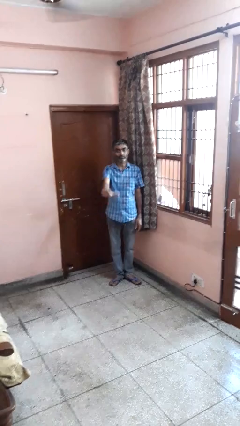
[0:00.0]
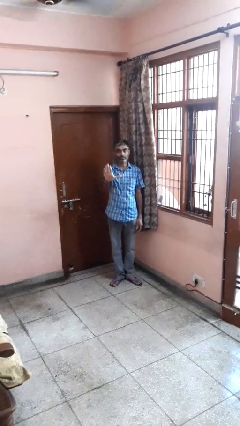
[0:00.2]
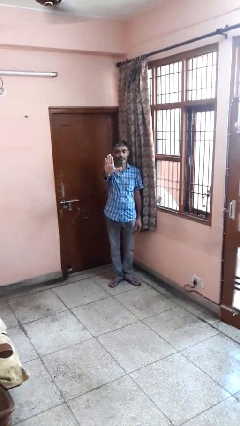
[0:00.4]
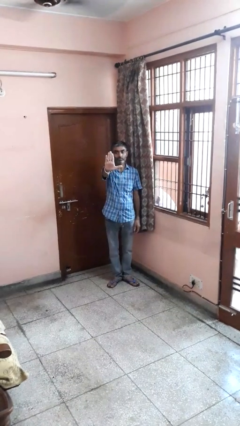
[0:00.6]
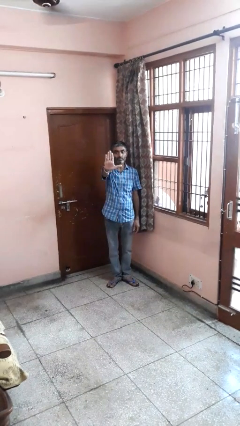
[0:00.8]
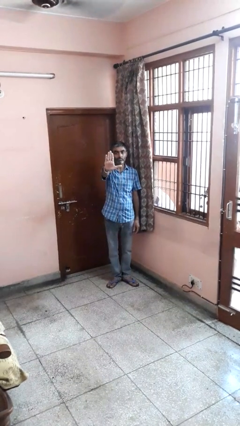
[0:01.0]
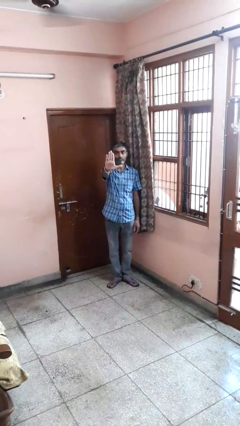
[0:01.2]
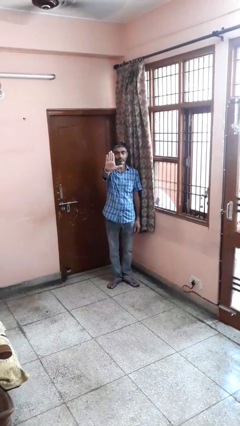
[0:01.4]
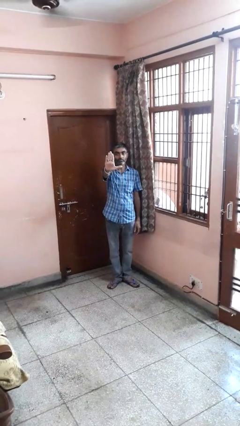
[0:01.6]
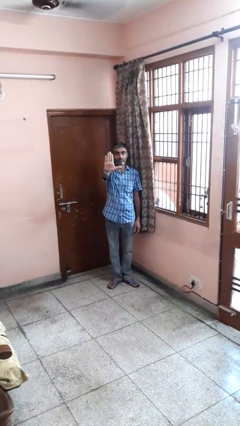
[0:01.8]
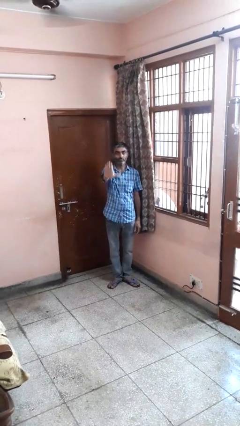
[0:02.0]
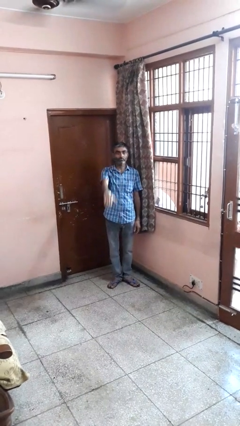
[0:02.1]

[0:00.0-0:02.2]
person gestures stop

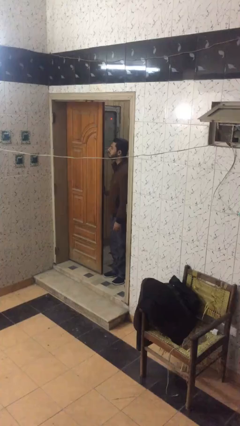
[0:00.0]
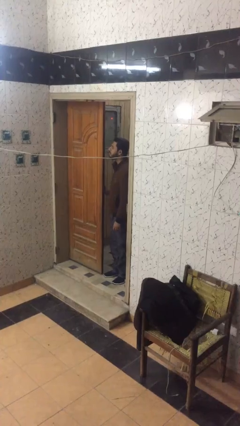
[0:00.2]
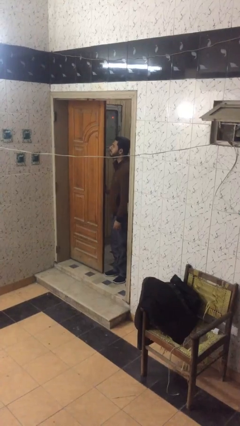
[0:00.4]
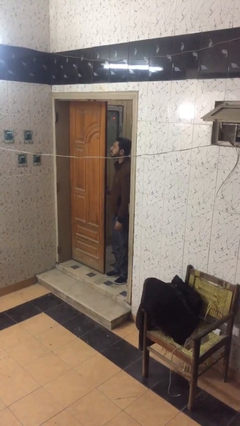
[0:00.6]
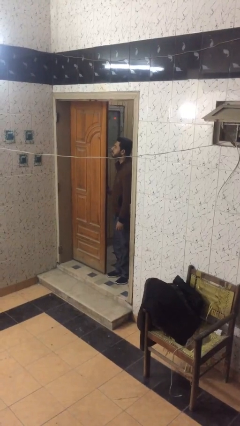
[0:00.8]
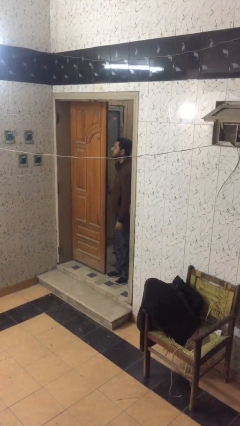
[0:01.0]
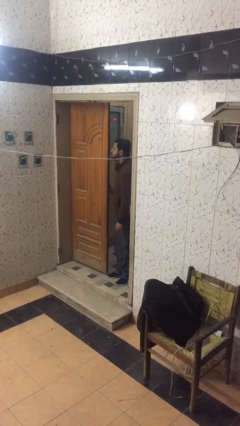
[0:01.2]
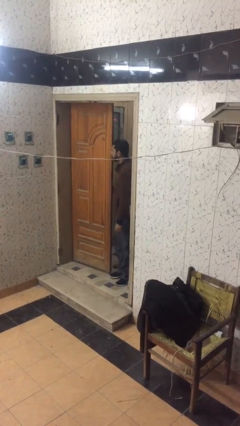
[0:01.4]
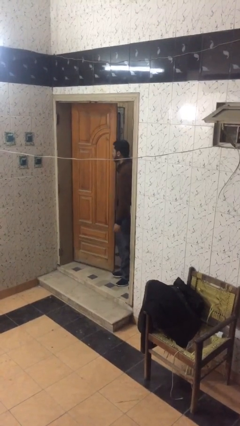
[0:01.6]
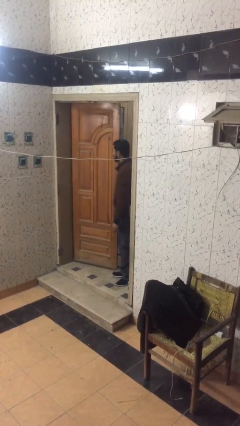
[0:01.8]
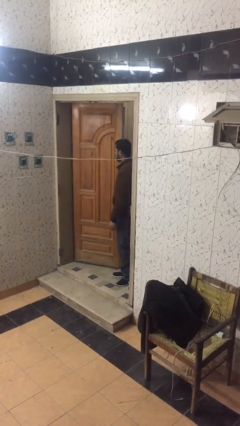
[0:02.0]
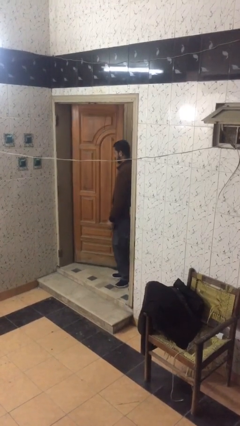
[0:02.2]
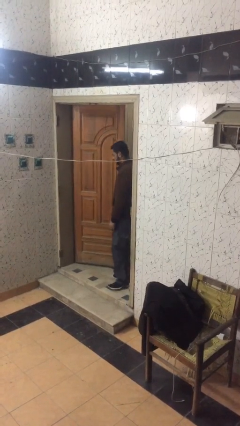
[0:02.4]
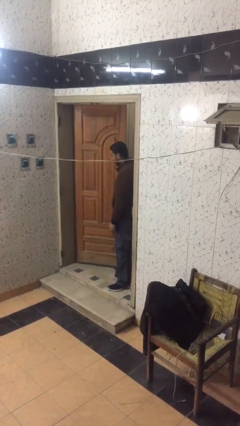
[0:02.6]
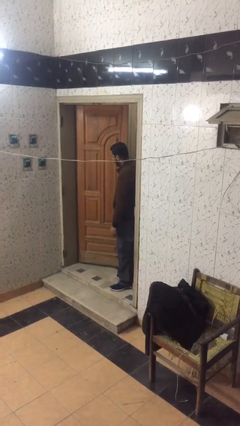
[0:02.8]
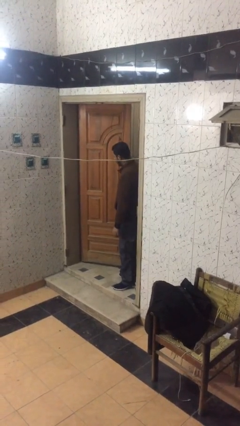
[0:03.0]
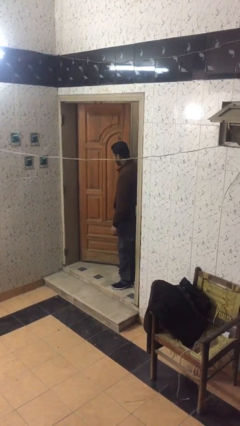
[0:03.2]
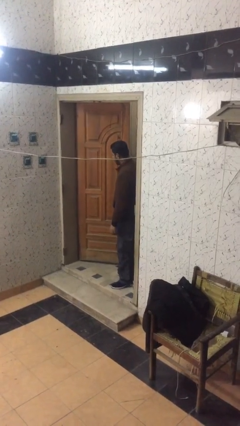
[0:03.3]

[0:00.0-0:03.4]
person opens facility door

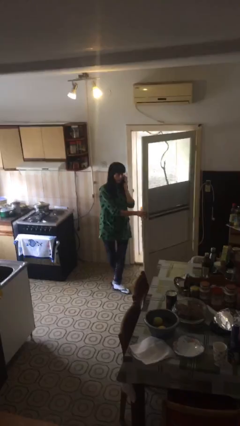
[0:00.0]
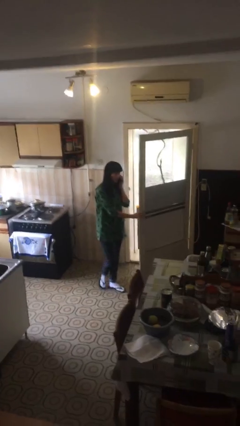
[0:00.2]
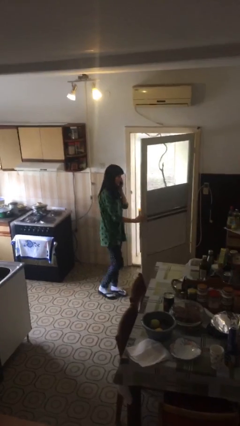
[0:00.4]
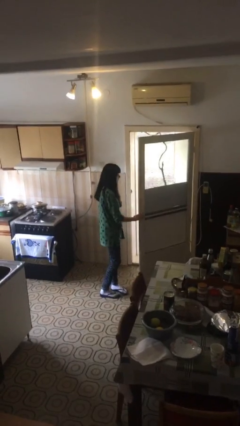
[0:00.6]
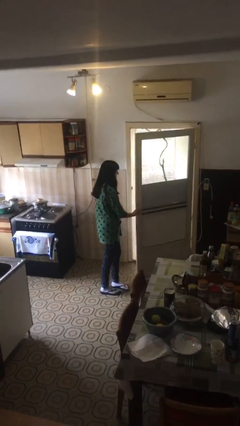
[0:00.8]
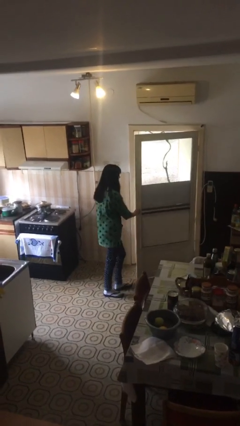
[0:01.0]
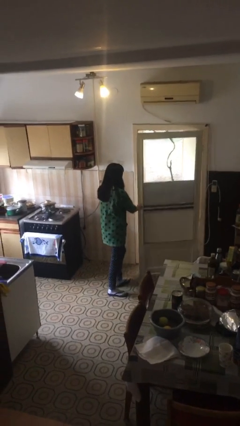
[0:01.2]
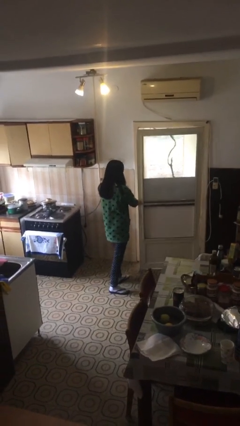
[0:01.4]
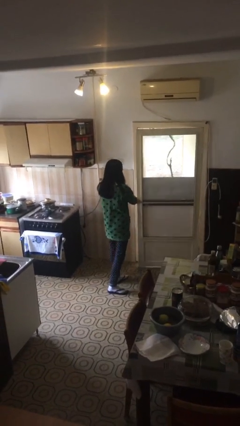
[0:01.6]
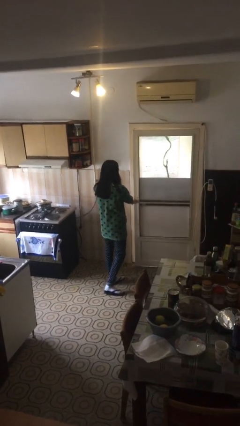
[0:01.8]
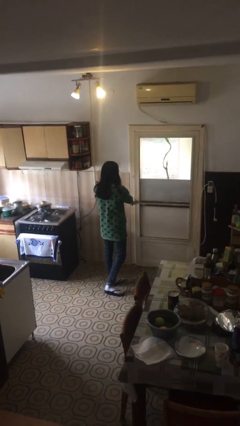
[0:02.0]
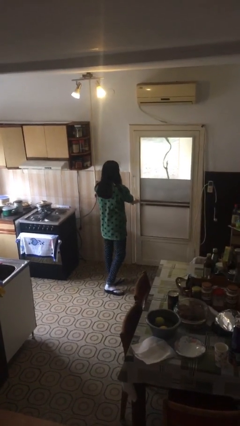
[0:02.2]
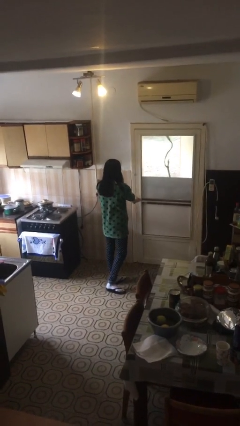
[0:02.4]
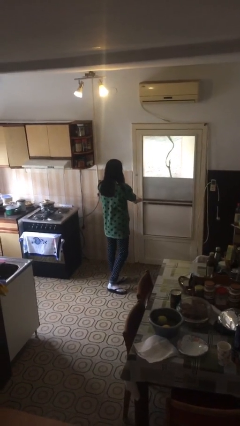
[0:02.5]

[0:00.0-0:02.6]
person closes facility door

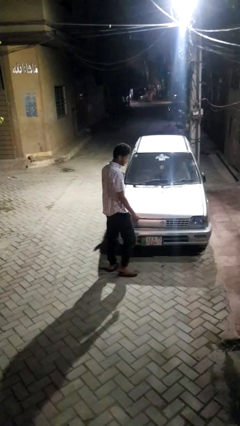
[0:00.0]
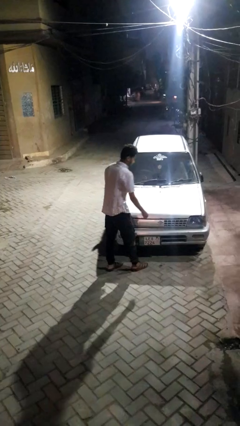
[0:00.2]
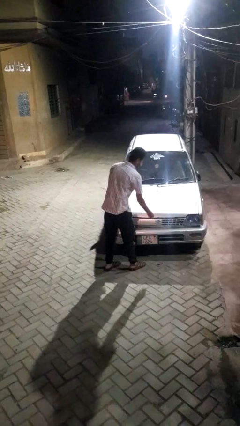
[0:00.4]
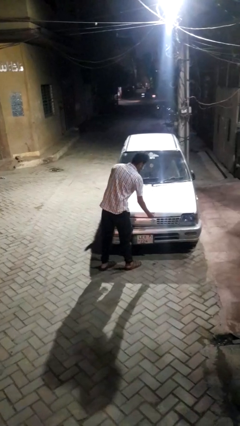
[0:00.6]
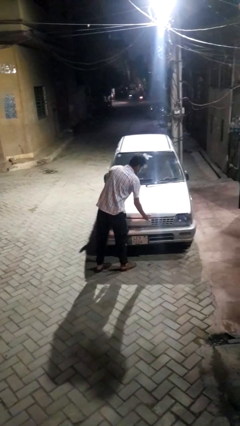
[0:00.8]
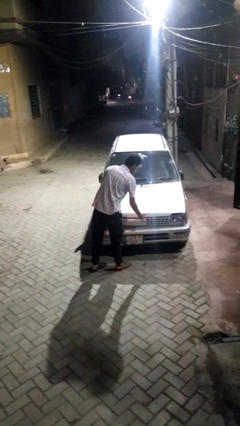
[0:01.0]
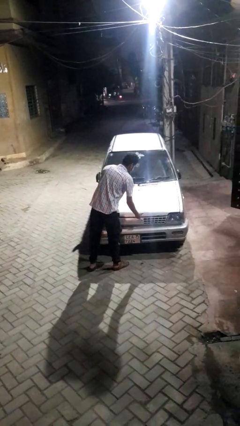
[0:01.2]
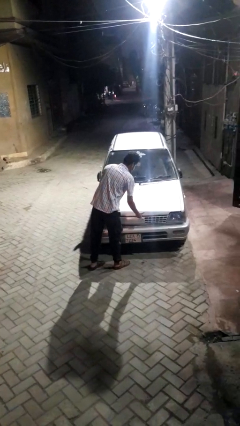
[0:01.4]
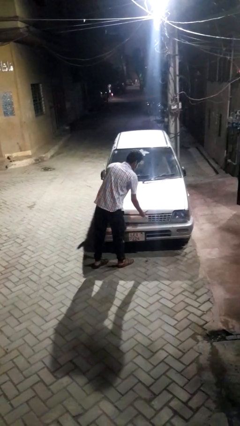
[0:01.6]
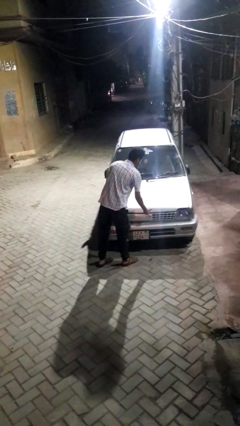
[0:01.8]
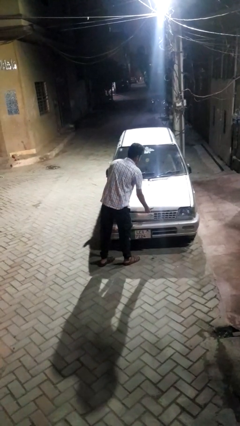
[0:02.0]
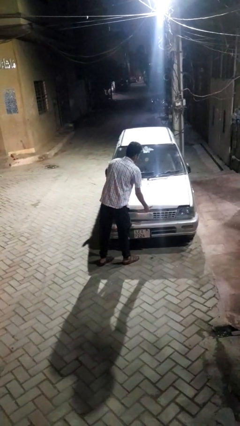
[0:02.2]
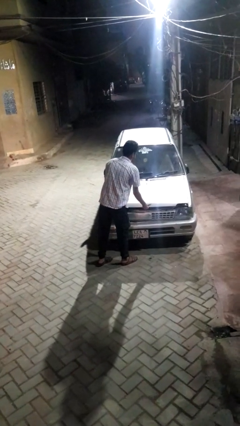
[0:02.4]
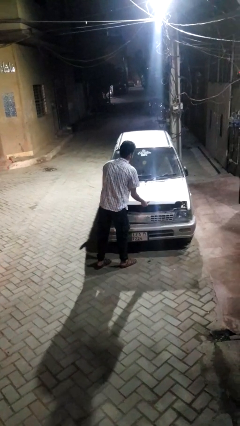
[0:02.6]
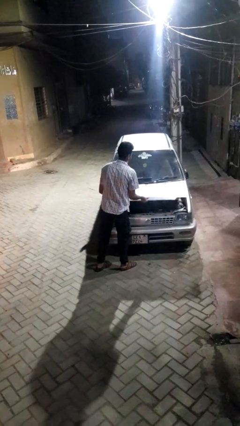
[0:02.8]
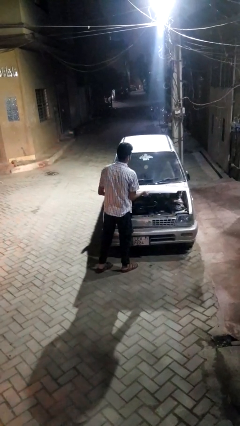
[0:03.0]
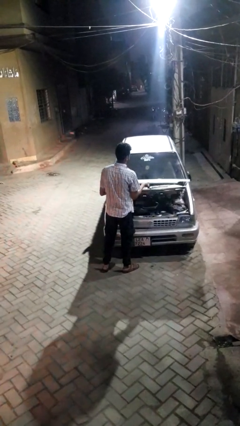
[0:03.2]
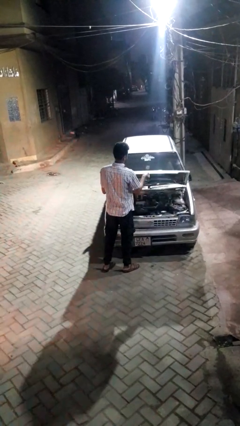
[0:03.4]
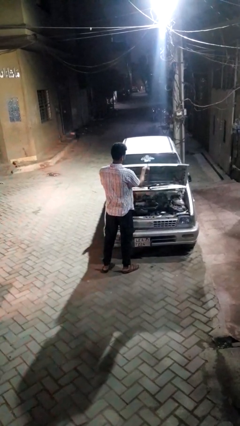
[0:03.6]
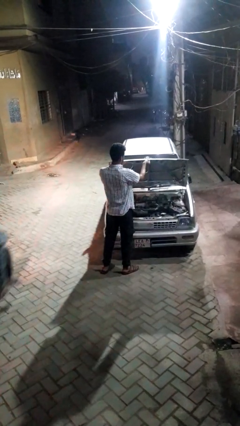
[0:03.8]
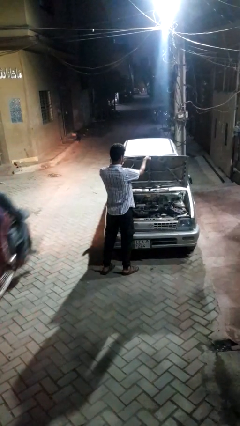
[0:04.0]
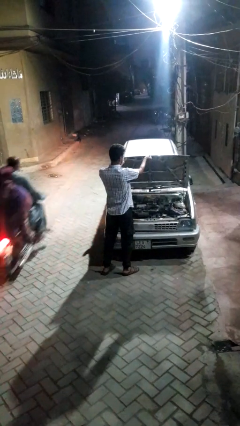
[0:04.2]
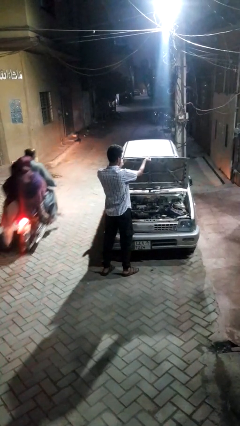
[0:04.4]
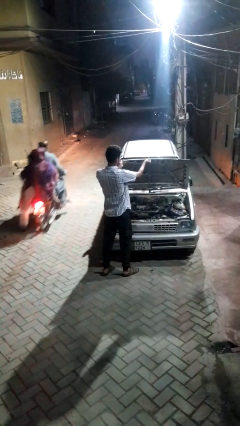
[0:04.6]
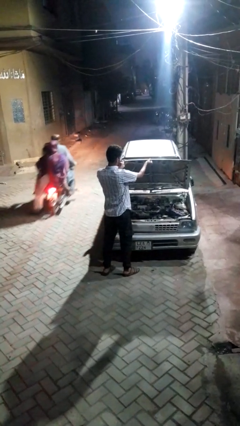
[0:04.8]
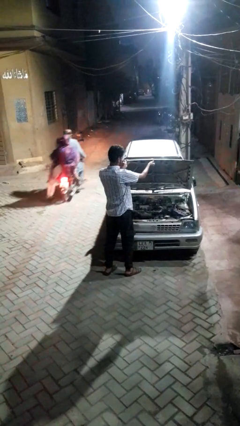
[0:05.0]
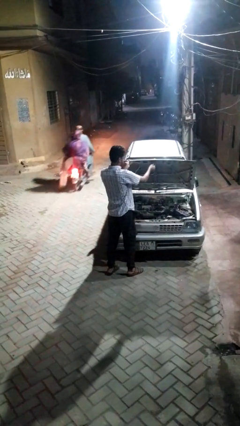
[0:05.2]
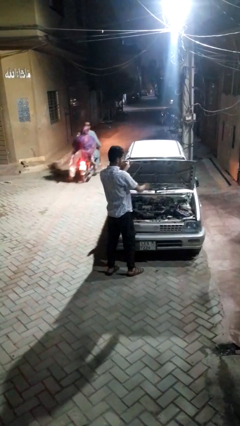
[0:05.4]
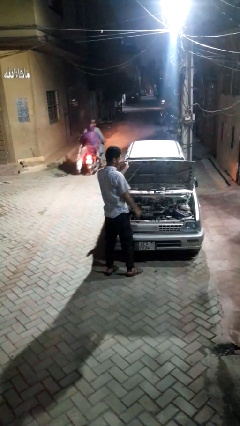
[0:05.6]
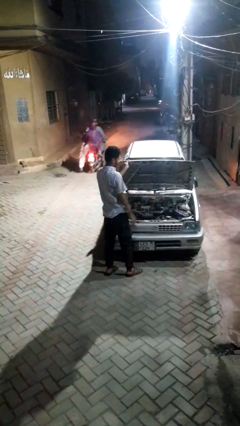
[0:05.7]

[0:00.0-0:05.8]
person opens car hood

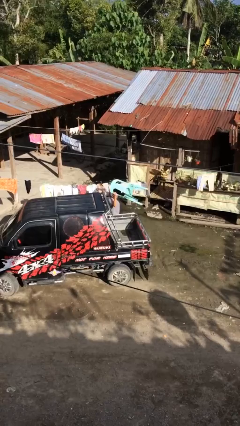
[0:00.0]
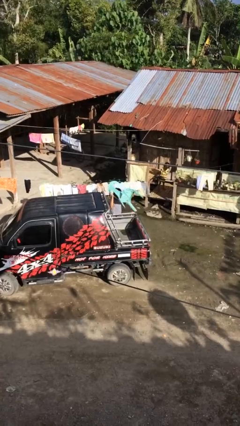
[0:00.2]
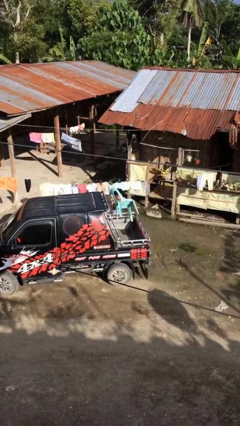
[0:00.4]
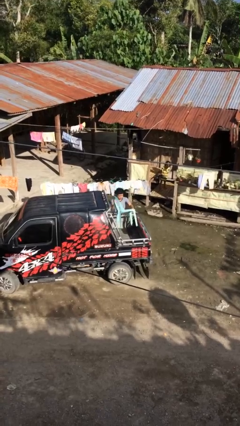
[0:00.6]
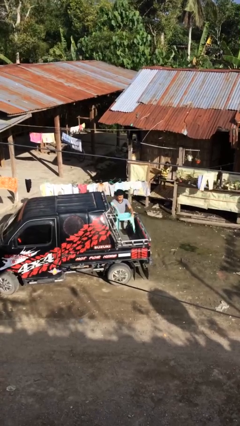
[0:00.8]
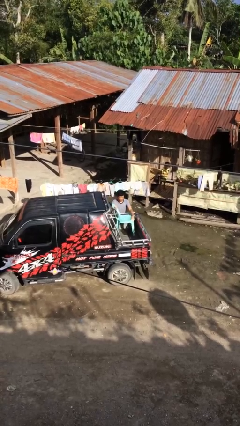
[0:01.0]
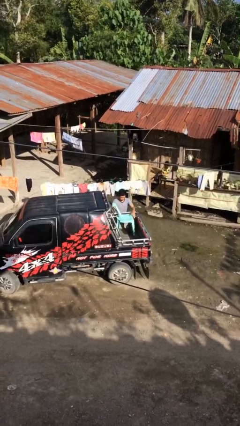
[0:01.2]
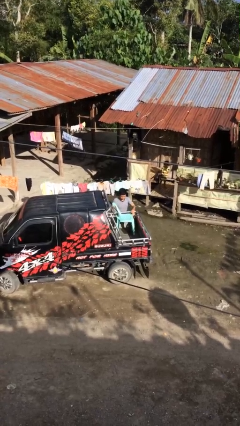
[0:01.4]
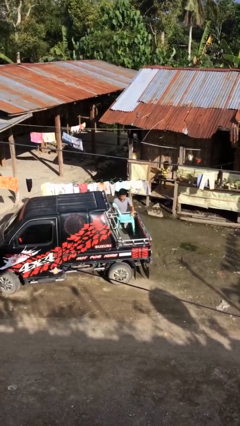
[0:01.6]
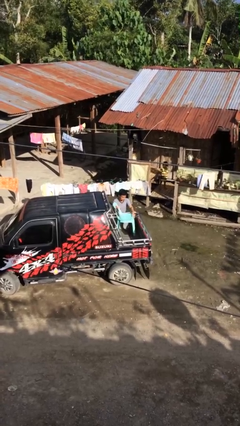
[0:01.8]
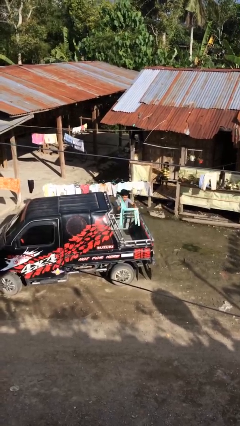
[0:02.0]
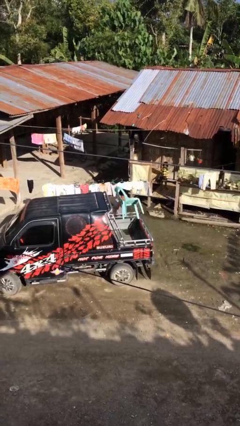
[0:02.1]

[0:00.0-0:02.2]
person loads car

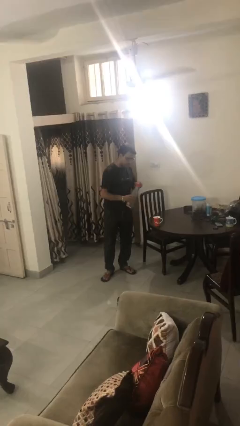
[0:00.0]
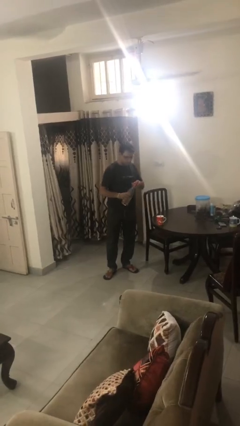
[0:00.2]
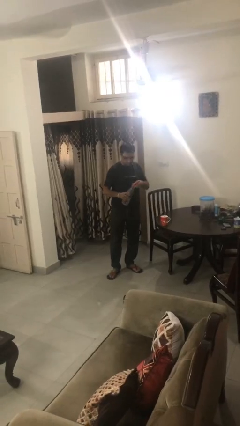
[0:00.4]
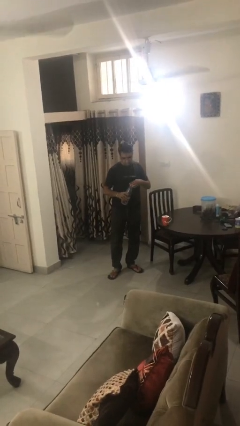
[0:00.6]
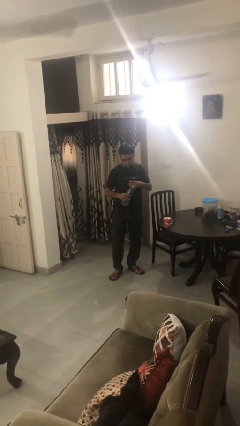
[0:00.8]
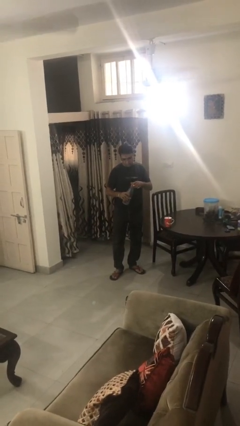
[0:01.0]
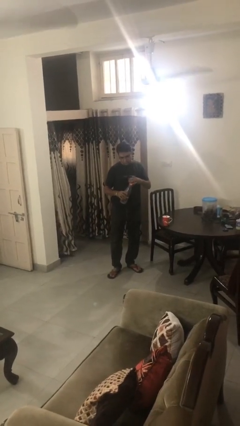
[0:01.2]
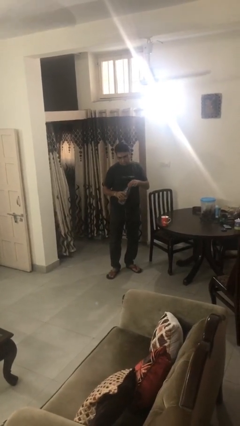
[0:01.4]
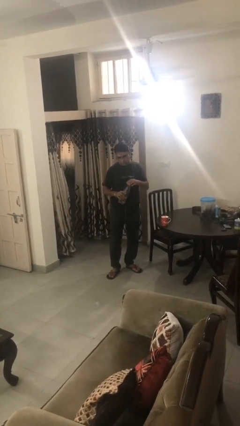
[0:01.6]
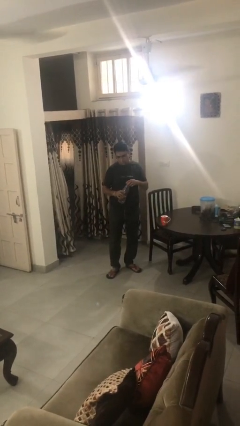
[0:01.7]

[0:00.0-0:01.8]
person screws lid to bottle
